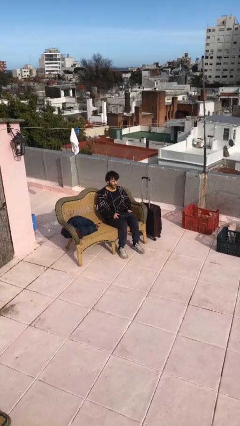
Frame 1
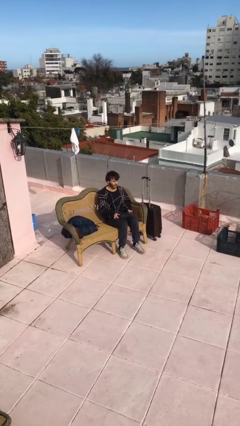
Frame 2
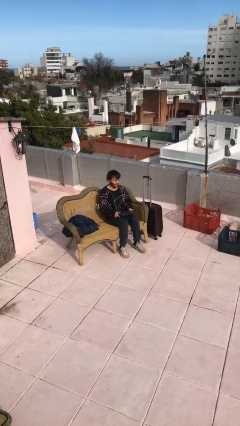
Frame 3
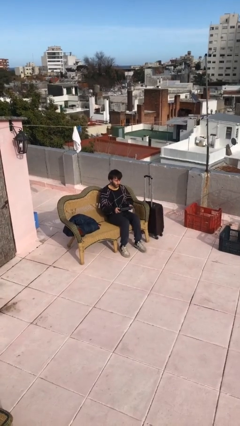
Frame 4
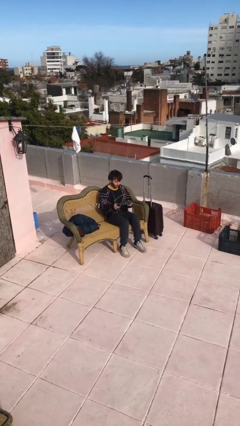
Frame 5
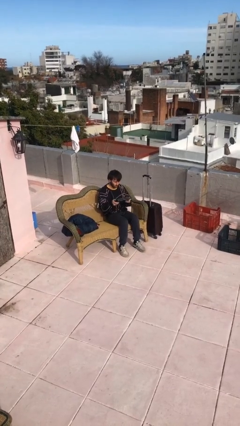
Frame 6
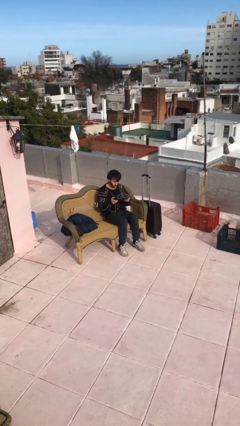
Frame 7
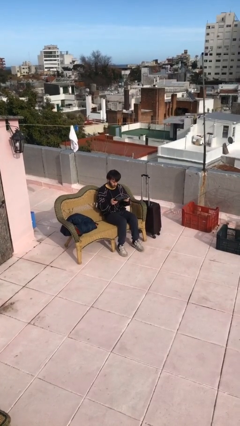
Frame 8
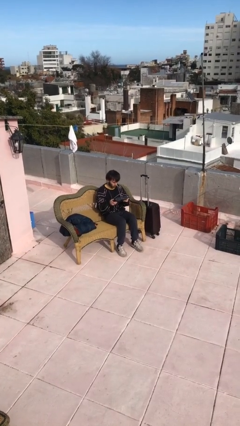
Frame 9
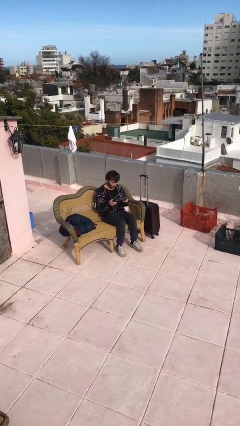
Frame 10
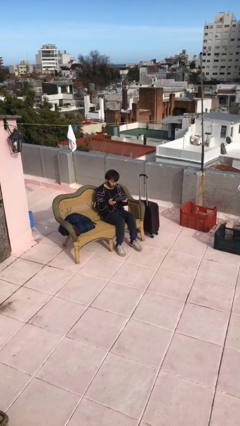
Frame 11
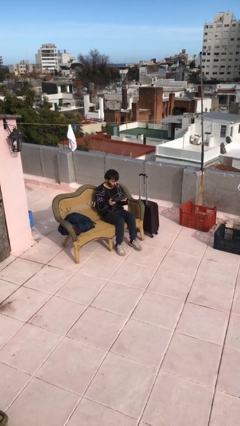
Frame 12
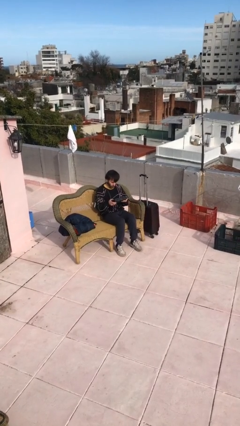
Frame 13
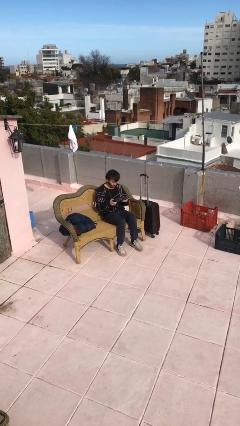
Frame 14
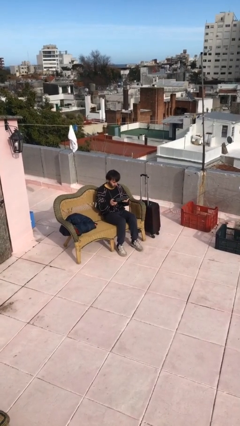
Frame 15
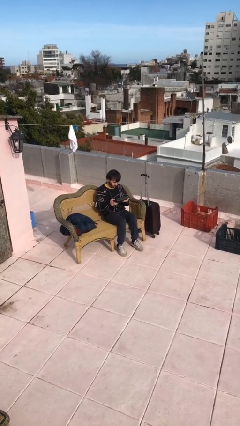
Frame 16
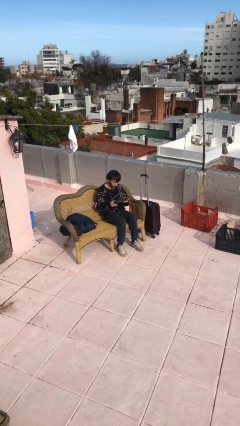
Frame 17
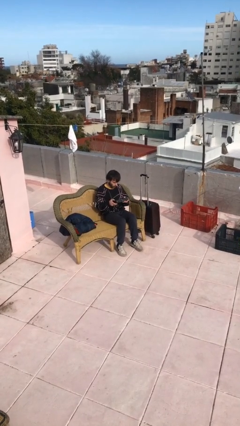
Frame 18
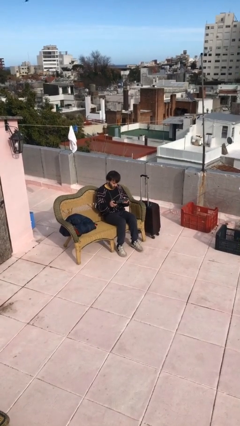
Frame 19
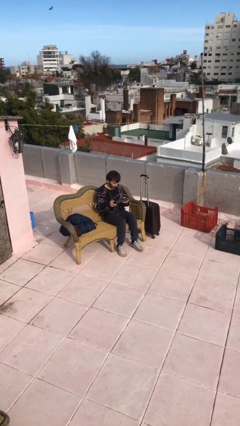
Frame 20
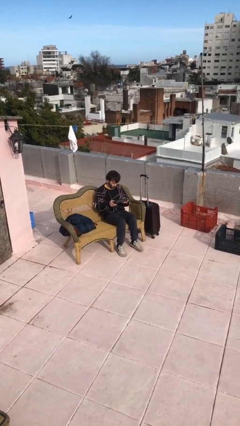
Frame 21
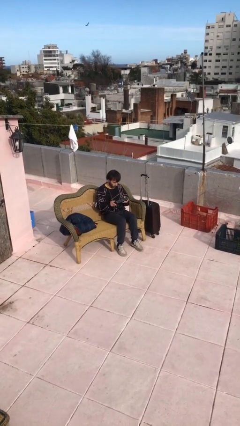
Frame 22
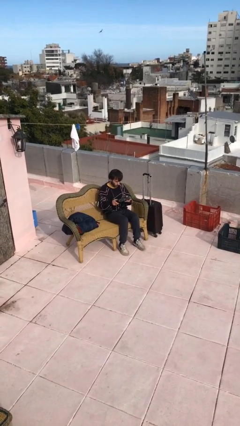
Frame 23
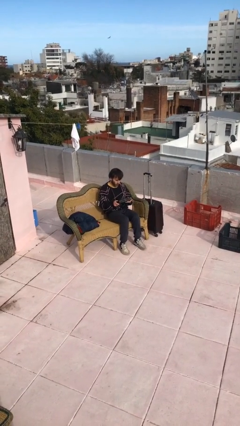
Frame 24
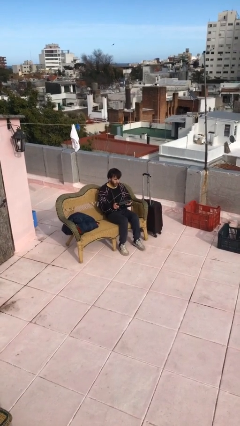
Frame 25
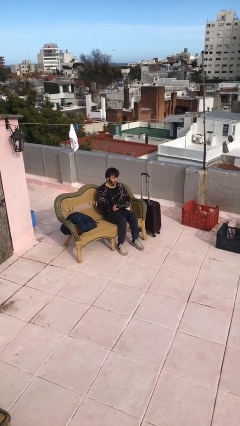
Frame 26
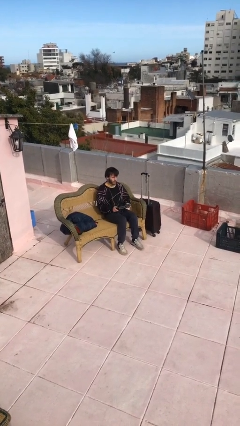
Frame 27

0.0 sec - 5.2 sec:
person interacts with handheld game

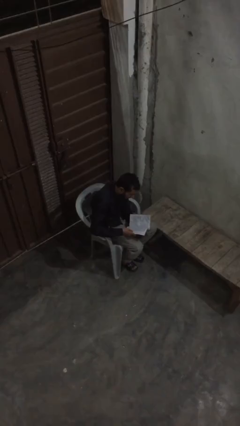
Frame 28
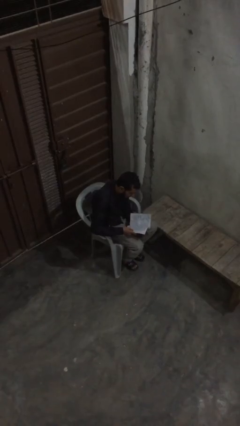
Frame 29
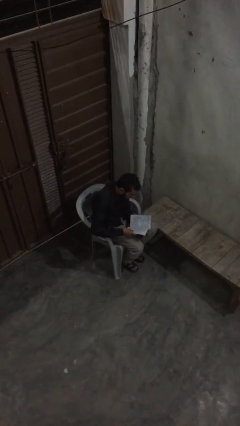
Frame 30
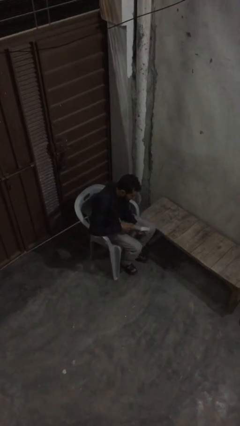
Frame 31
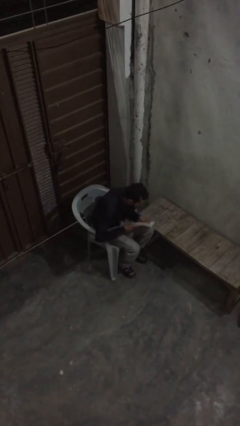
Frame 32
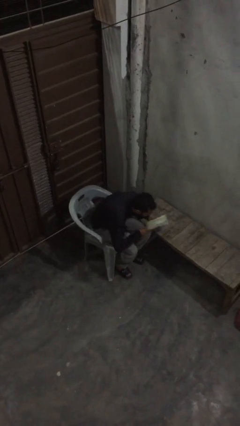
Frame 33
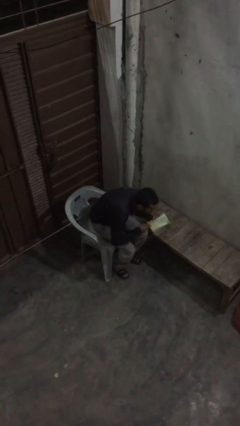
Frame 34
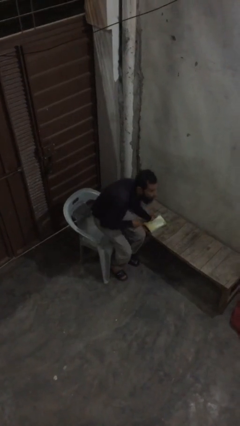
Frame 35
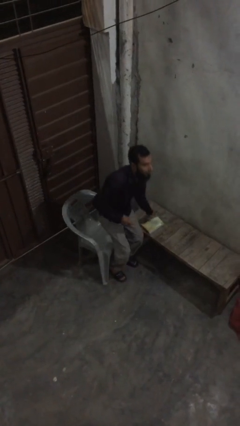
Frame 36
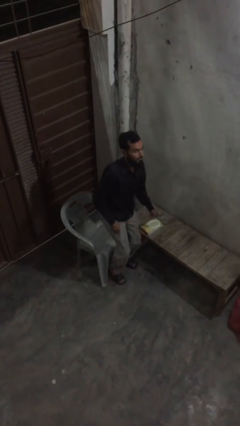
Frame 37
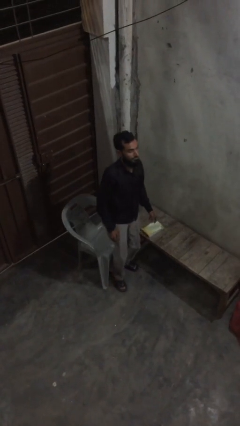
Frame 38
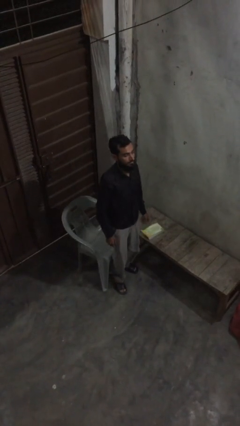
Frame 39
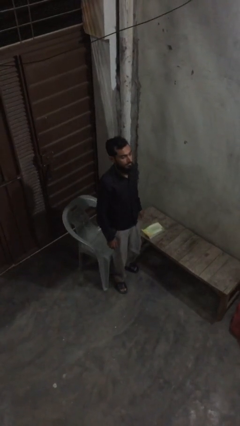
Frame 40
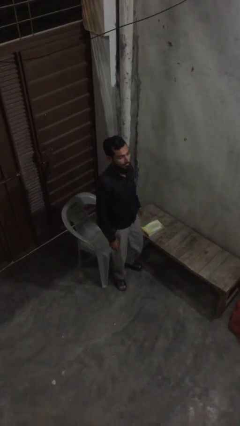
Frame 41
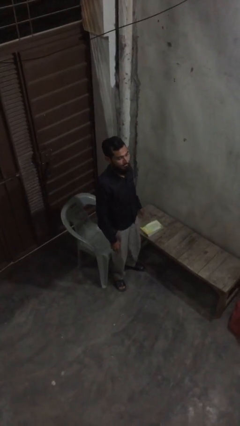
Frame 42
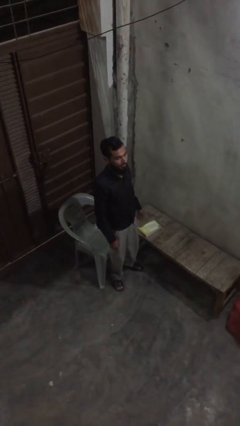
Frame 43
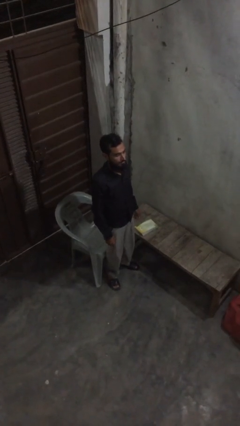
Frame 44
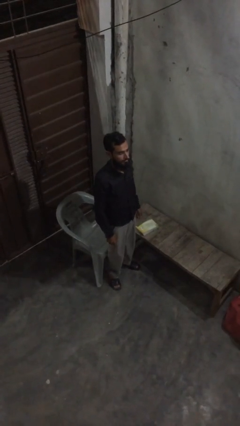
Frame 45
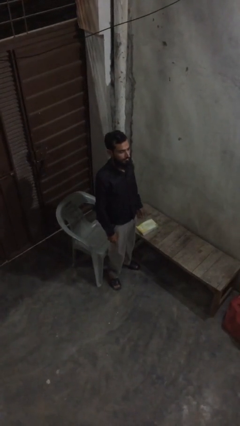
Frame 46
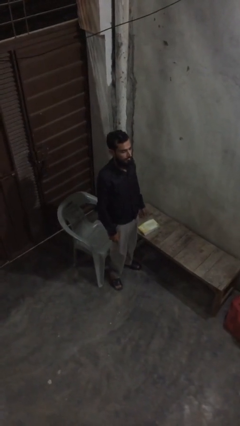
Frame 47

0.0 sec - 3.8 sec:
person stands up

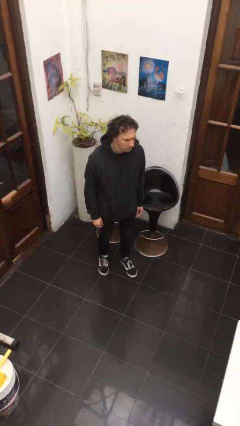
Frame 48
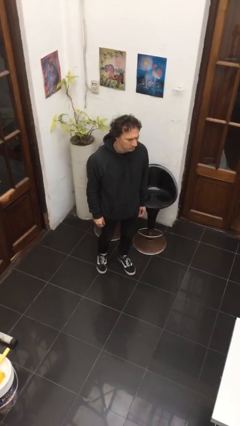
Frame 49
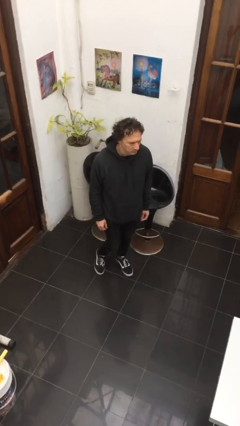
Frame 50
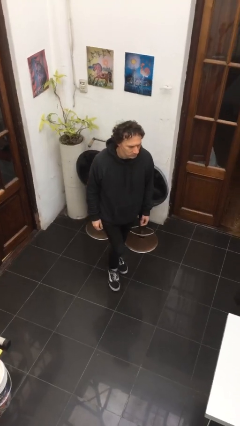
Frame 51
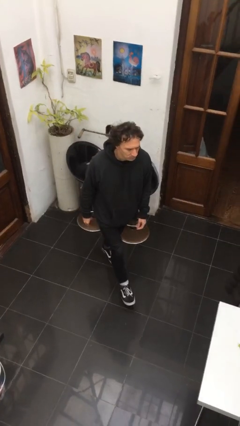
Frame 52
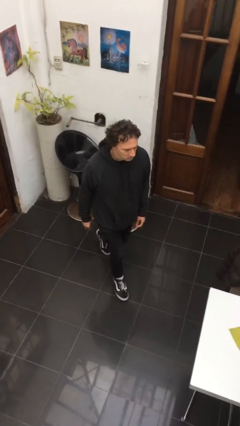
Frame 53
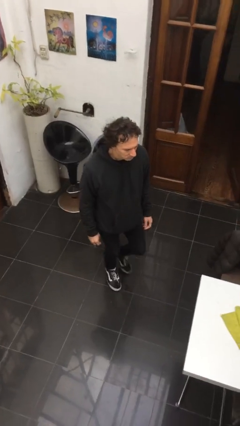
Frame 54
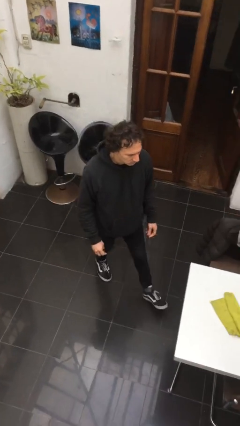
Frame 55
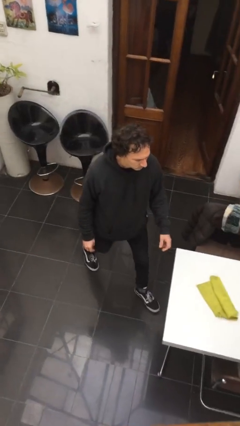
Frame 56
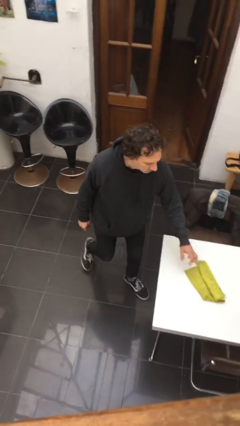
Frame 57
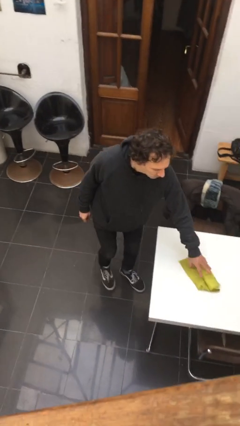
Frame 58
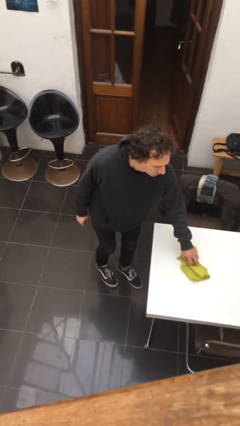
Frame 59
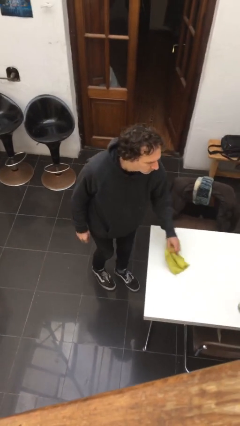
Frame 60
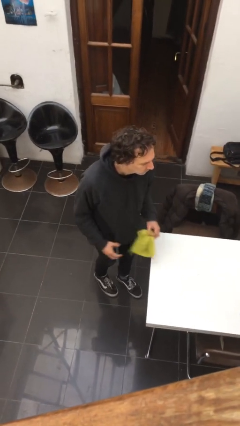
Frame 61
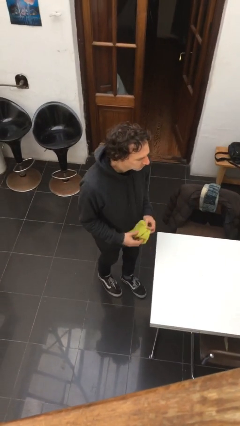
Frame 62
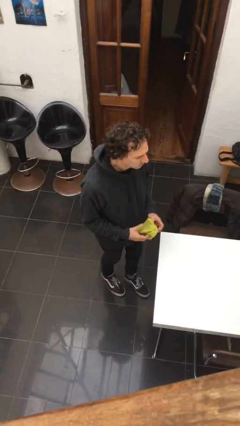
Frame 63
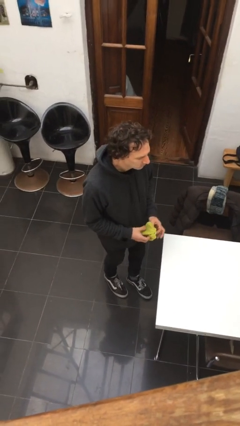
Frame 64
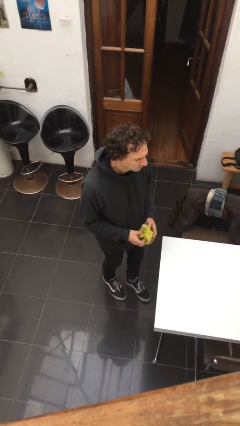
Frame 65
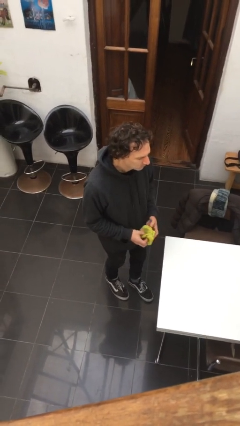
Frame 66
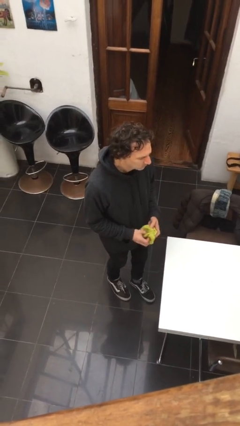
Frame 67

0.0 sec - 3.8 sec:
person picks up object from table

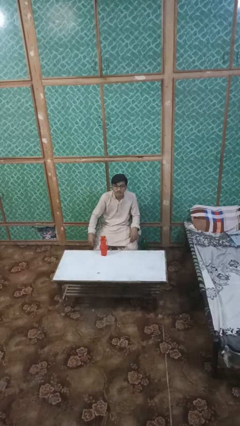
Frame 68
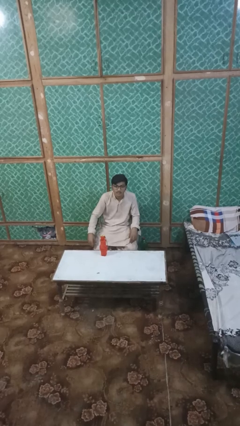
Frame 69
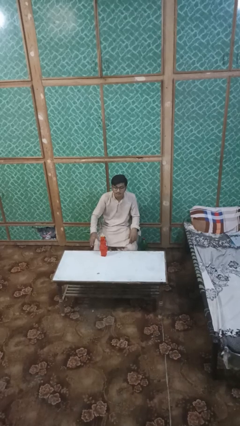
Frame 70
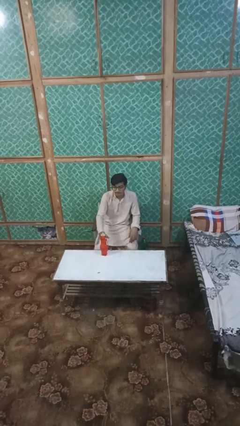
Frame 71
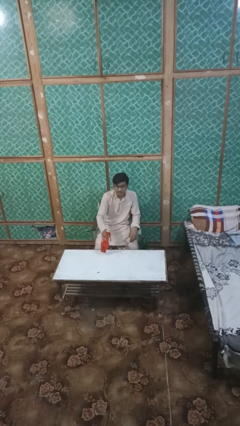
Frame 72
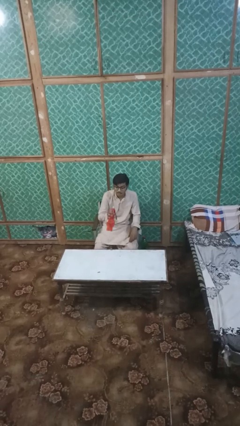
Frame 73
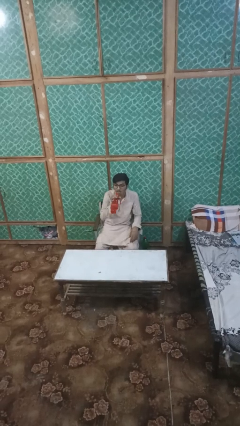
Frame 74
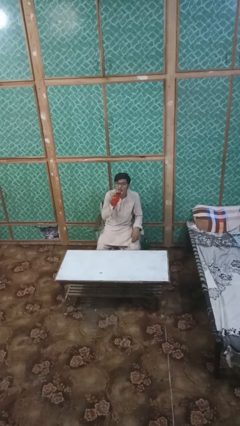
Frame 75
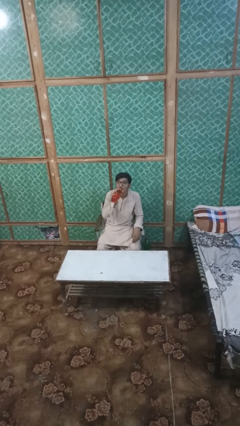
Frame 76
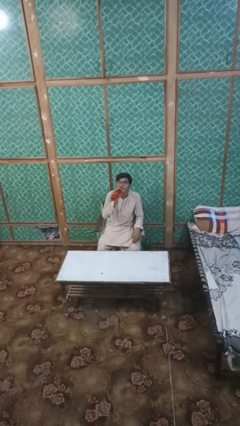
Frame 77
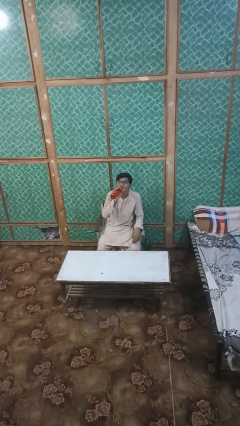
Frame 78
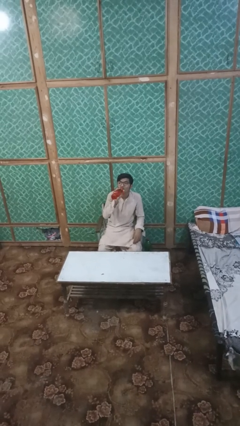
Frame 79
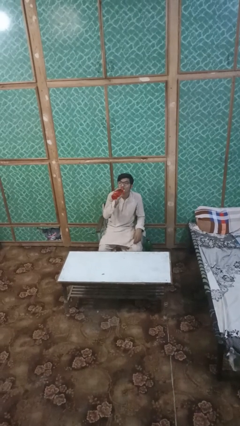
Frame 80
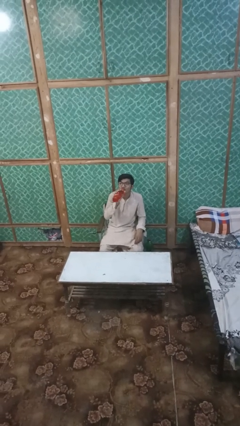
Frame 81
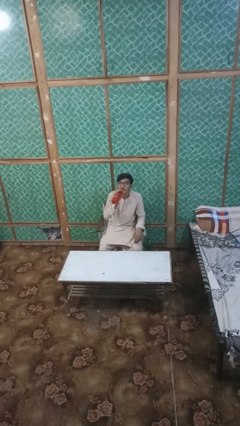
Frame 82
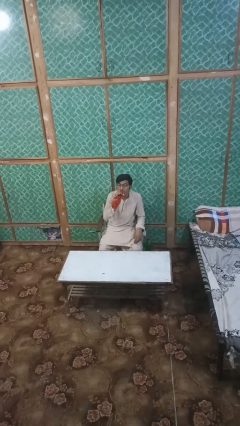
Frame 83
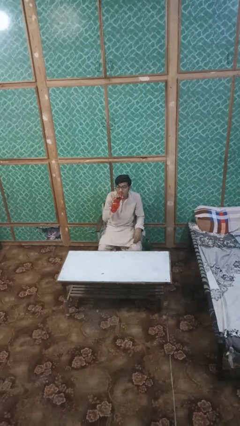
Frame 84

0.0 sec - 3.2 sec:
person drinks from bottle

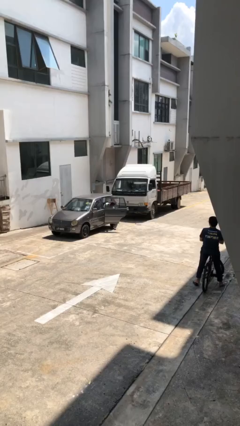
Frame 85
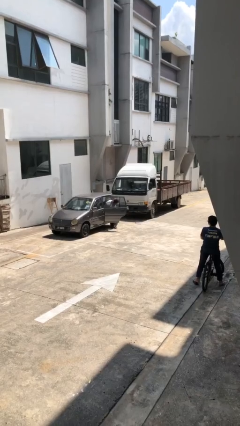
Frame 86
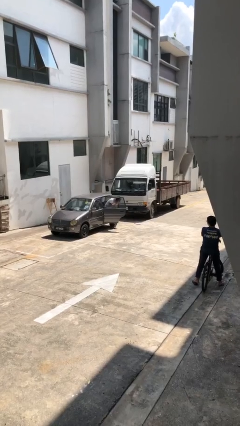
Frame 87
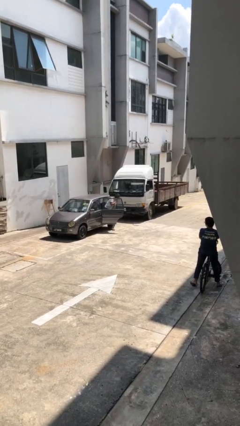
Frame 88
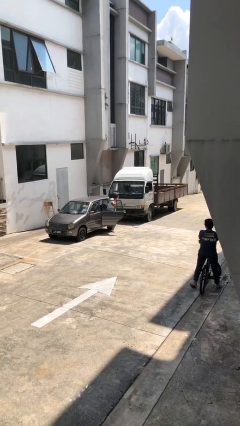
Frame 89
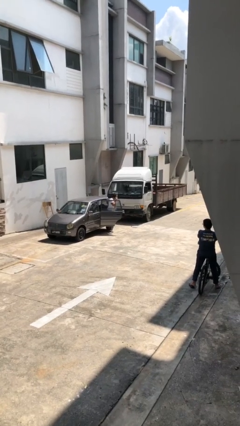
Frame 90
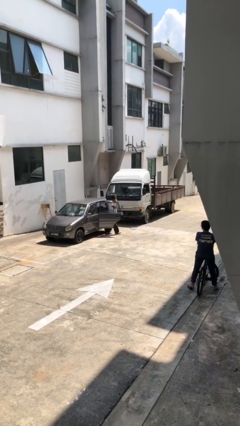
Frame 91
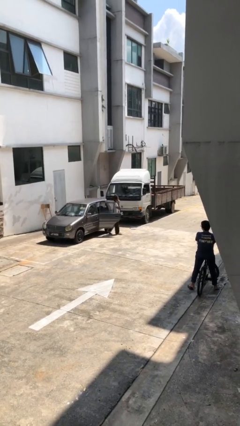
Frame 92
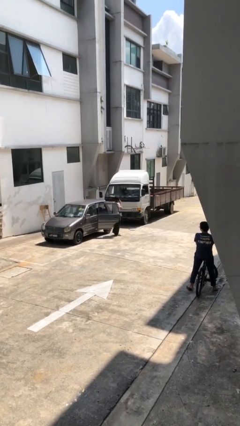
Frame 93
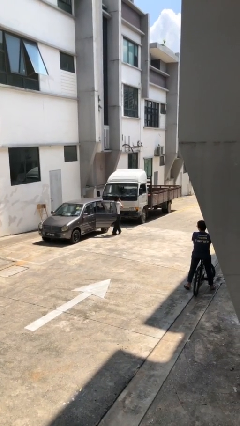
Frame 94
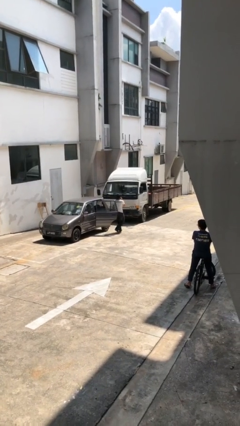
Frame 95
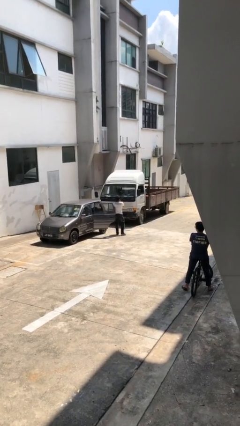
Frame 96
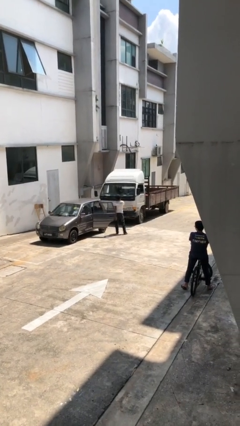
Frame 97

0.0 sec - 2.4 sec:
person exits car
